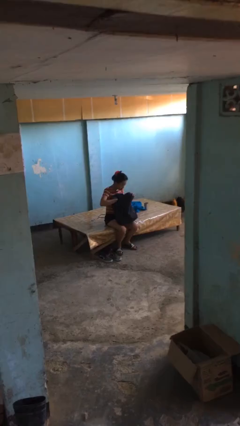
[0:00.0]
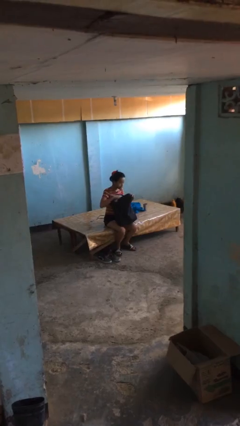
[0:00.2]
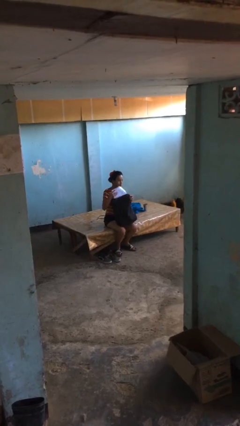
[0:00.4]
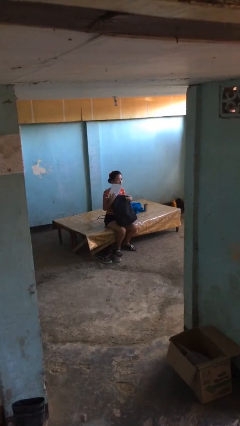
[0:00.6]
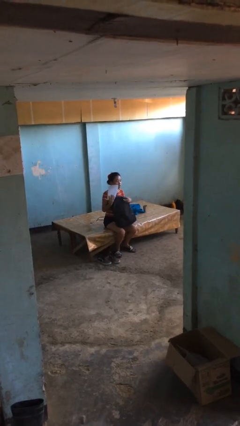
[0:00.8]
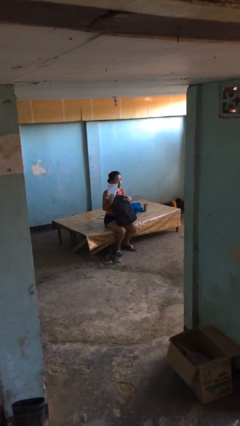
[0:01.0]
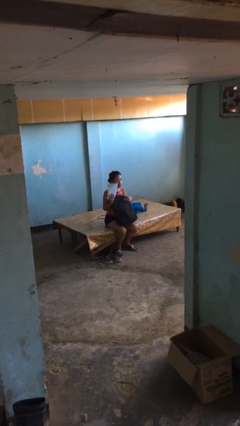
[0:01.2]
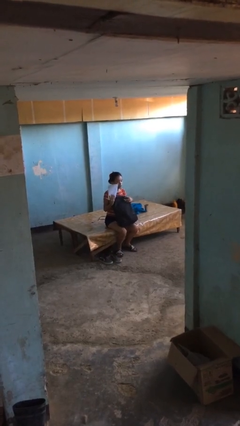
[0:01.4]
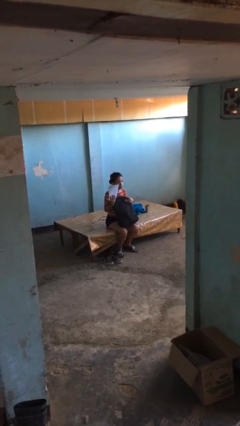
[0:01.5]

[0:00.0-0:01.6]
person takes object from backpack

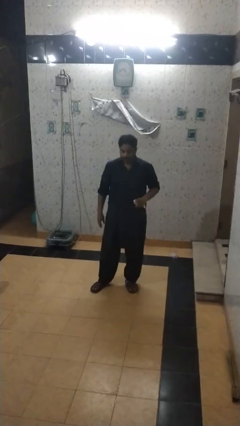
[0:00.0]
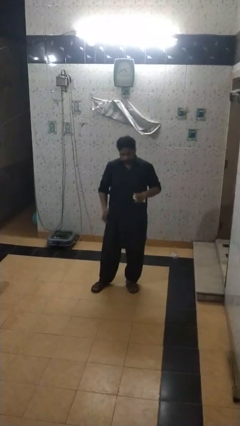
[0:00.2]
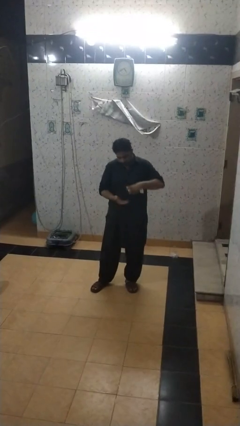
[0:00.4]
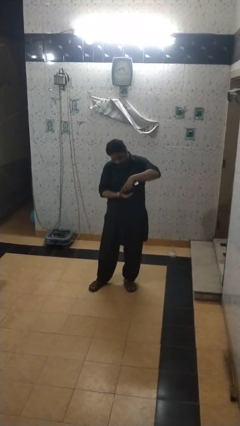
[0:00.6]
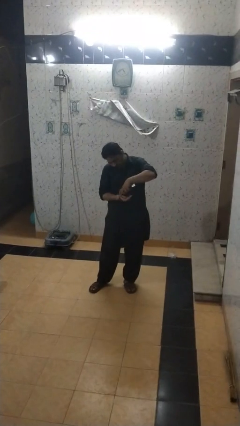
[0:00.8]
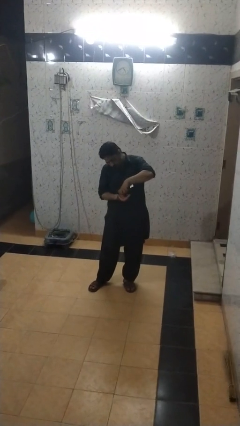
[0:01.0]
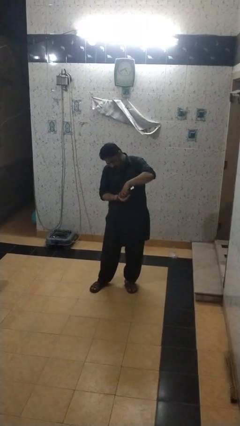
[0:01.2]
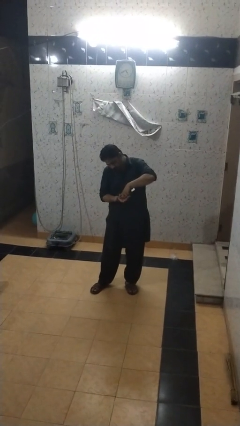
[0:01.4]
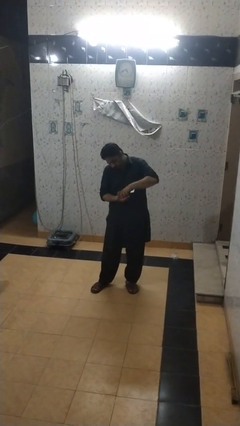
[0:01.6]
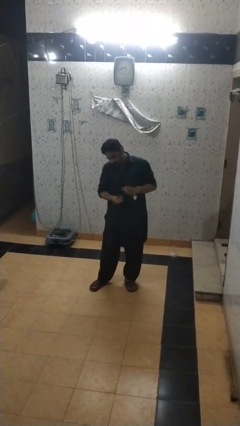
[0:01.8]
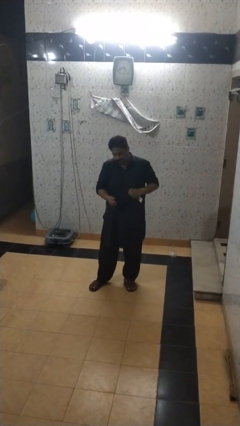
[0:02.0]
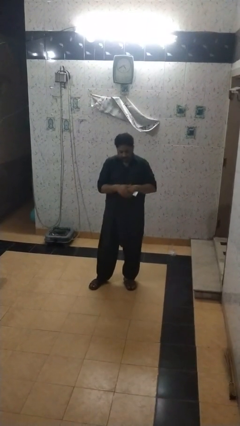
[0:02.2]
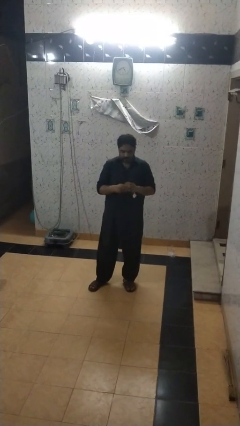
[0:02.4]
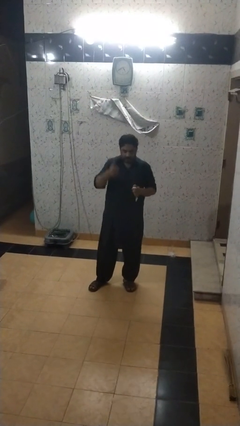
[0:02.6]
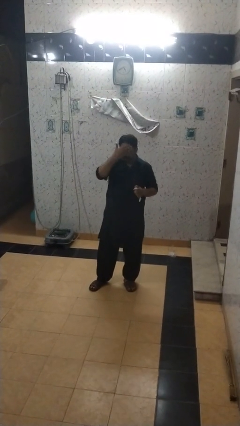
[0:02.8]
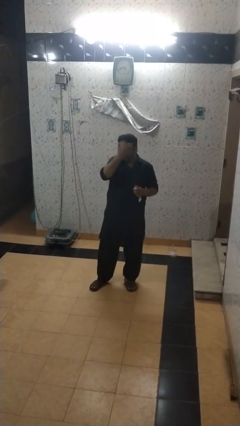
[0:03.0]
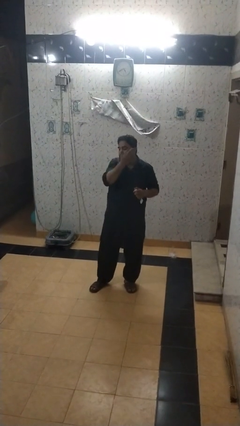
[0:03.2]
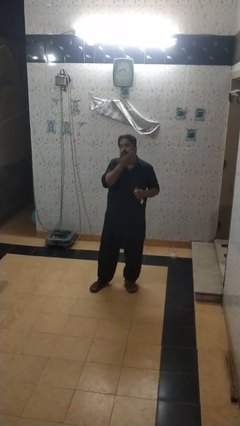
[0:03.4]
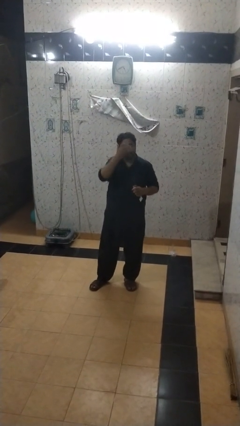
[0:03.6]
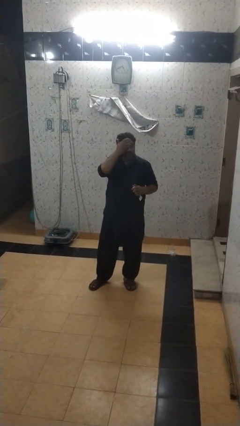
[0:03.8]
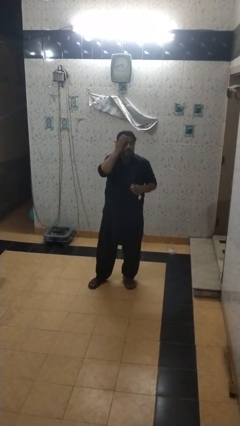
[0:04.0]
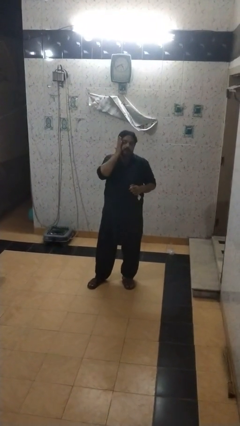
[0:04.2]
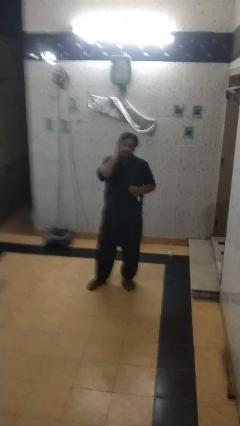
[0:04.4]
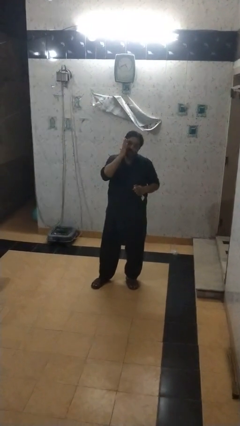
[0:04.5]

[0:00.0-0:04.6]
person applies facial moisturizer

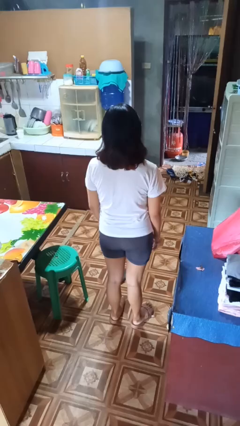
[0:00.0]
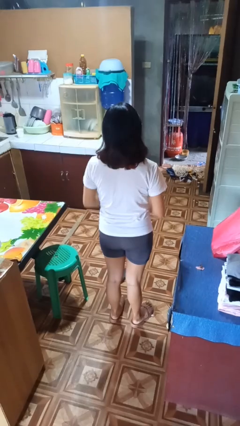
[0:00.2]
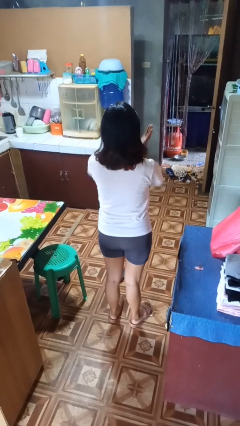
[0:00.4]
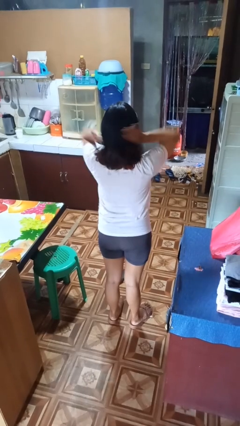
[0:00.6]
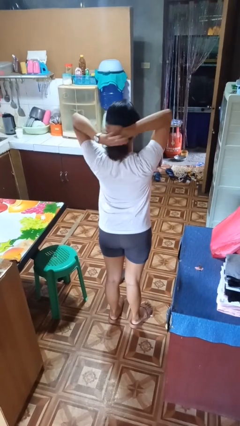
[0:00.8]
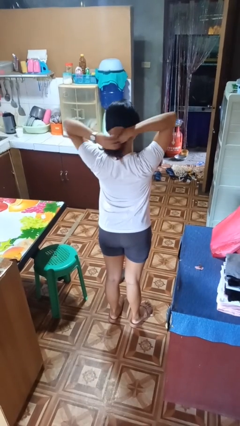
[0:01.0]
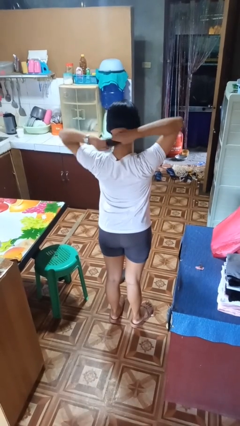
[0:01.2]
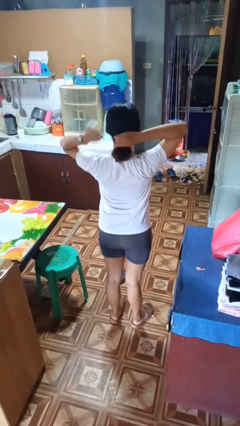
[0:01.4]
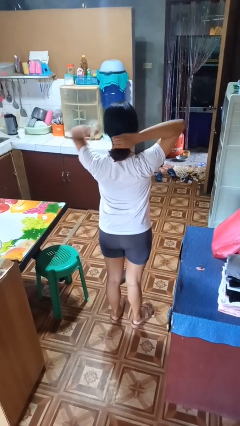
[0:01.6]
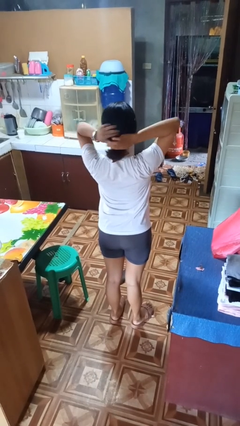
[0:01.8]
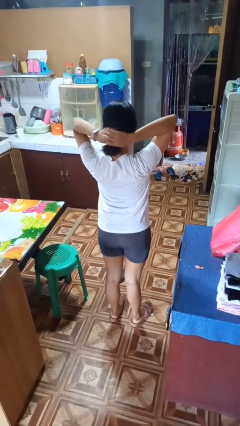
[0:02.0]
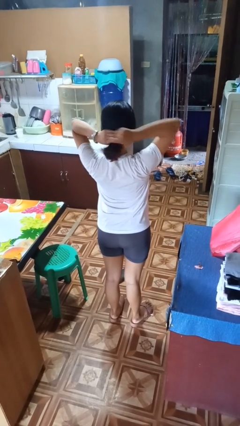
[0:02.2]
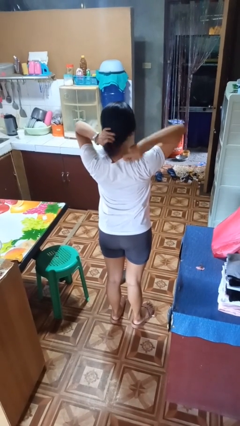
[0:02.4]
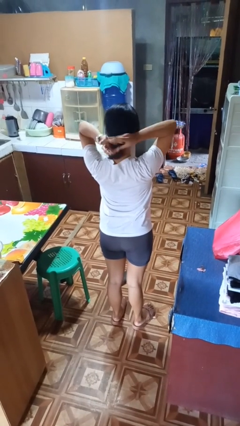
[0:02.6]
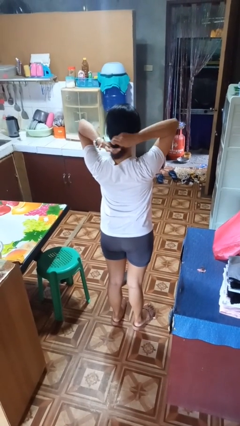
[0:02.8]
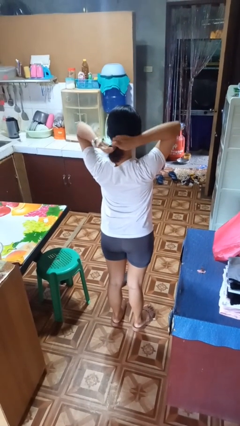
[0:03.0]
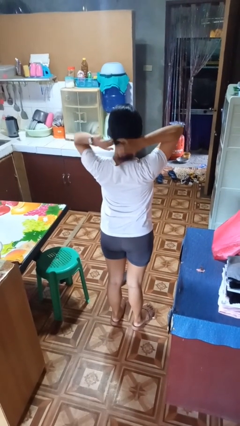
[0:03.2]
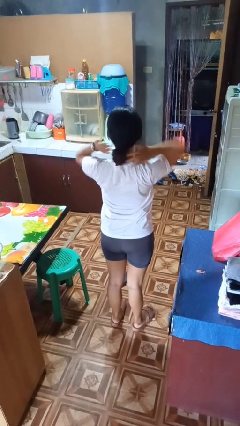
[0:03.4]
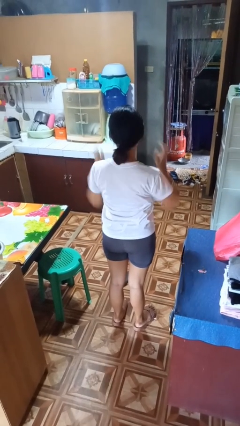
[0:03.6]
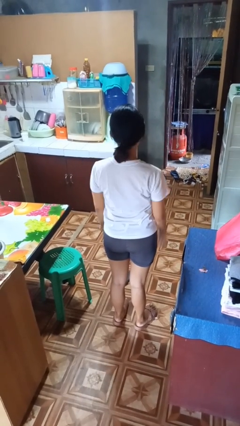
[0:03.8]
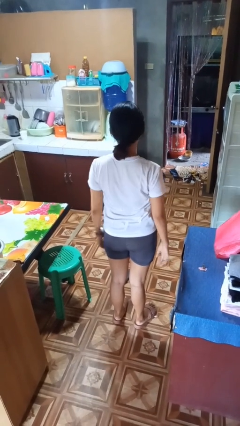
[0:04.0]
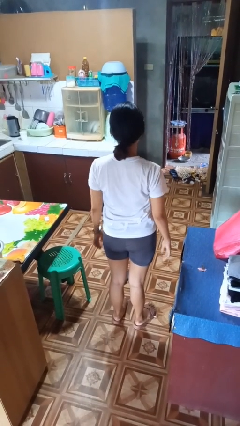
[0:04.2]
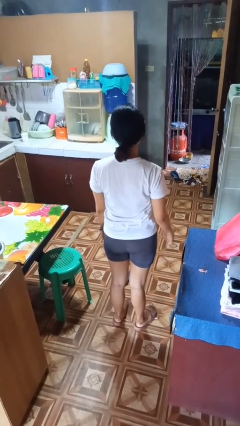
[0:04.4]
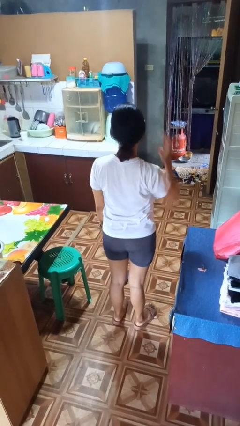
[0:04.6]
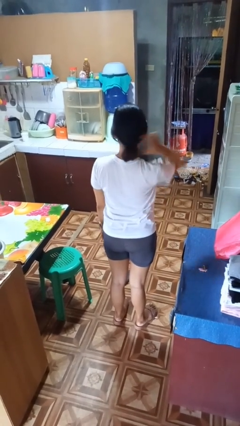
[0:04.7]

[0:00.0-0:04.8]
person puts hair in ponytail

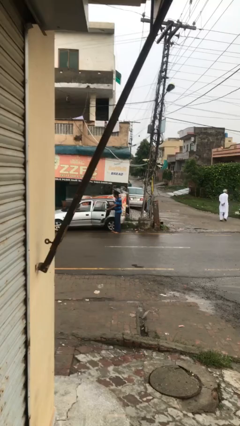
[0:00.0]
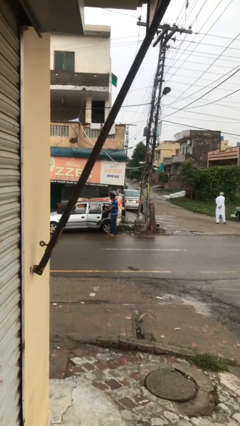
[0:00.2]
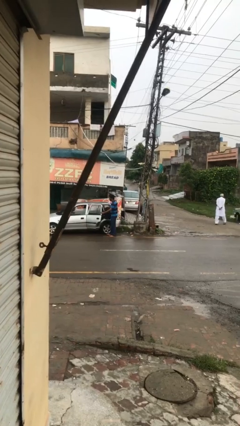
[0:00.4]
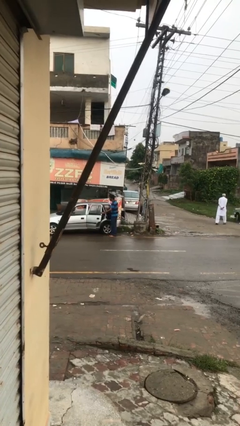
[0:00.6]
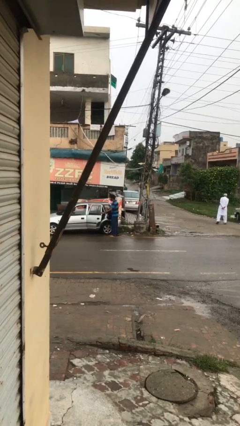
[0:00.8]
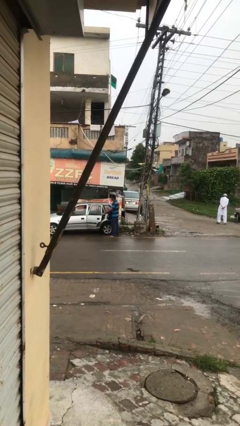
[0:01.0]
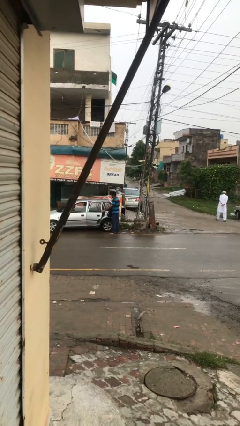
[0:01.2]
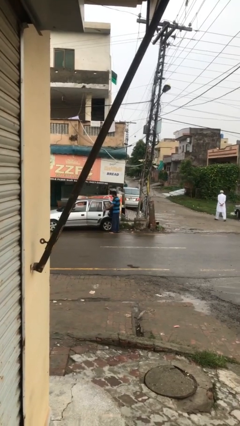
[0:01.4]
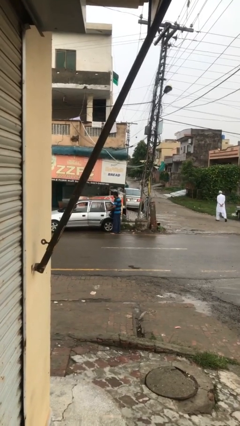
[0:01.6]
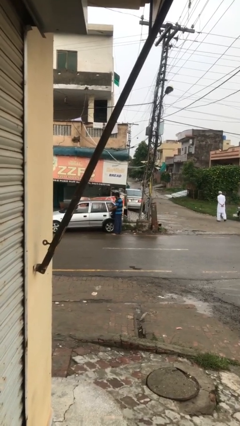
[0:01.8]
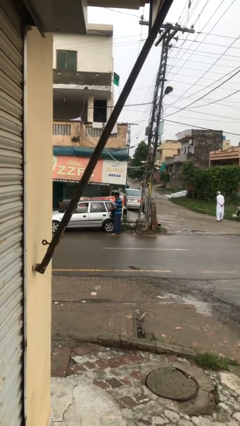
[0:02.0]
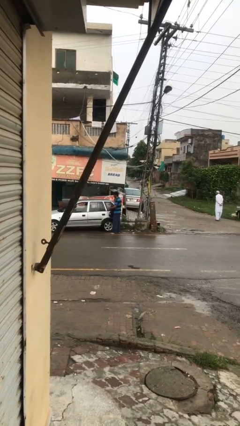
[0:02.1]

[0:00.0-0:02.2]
person closes car door

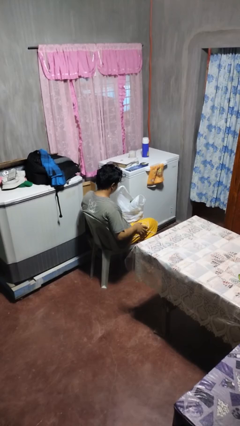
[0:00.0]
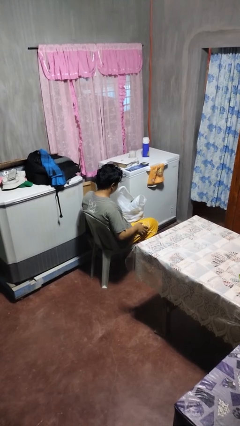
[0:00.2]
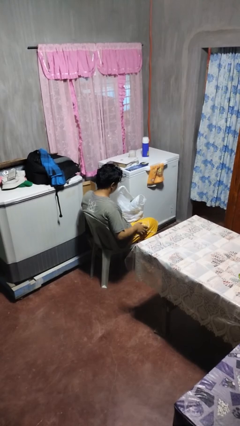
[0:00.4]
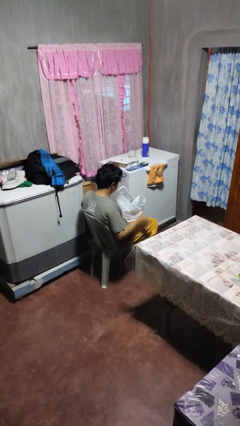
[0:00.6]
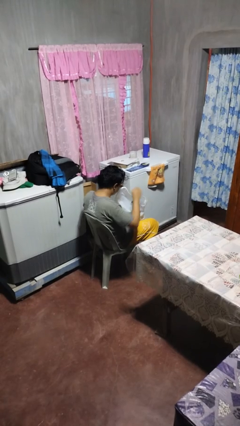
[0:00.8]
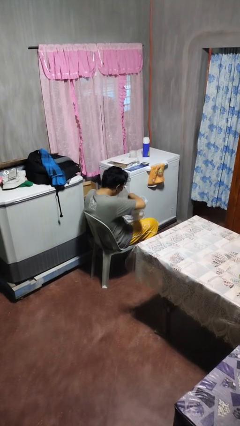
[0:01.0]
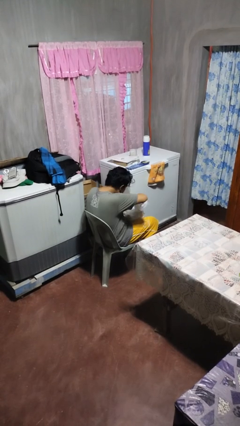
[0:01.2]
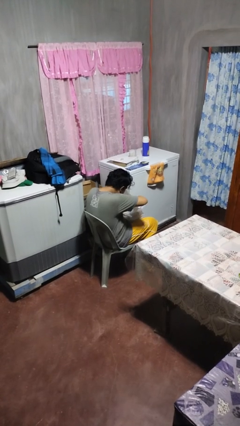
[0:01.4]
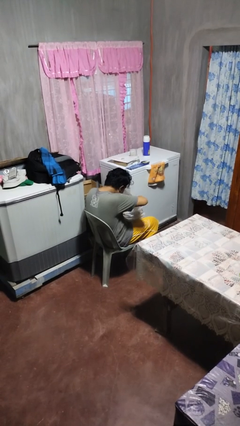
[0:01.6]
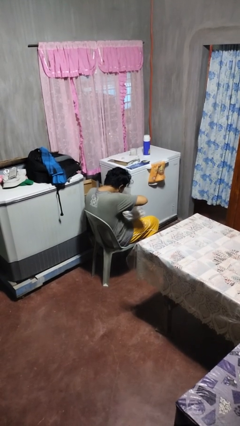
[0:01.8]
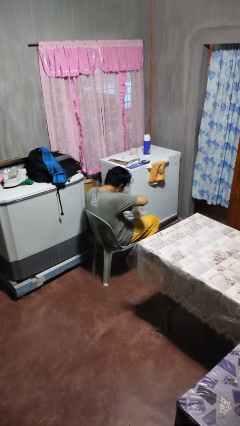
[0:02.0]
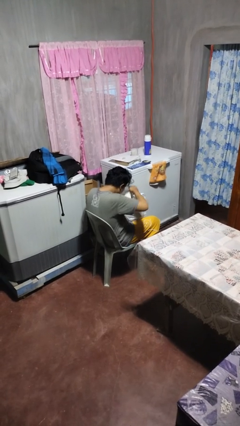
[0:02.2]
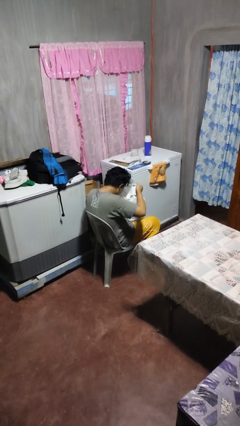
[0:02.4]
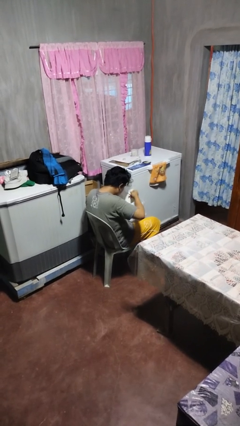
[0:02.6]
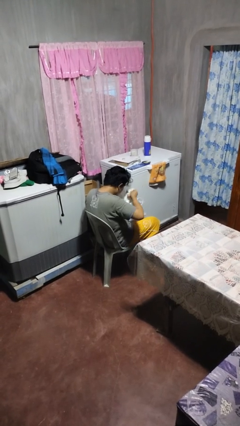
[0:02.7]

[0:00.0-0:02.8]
person searches in bag

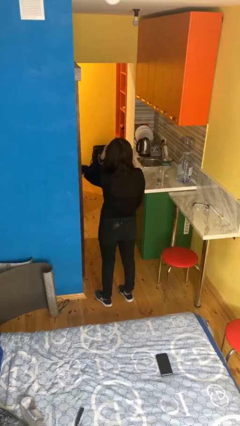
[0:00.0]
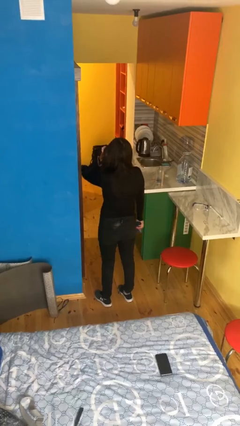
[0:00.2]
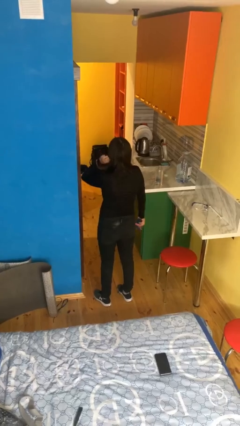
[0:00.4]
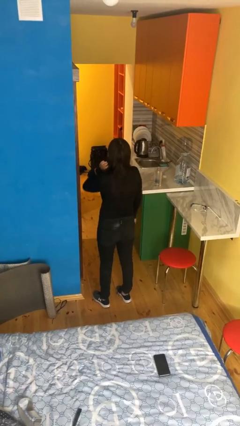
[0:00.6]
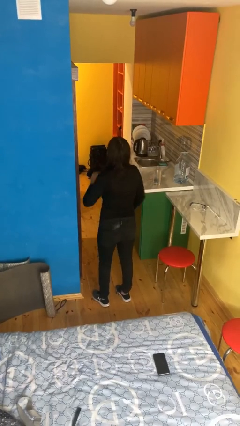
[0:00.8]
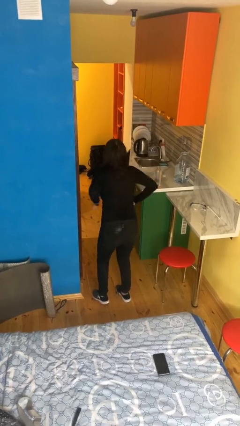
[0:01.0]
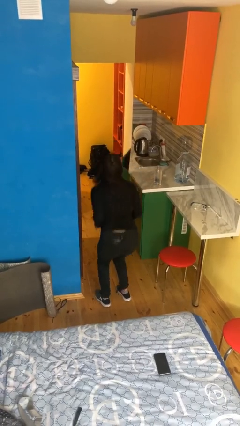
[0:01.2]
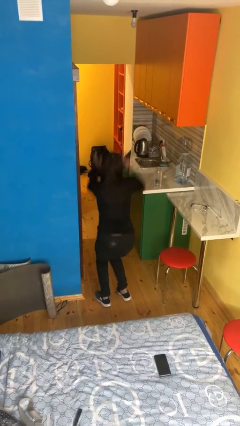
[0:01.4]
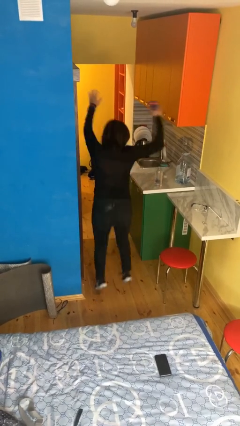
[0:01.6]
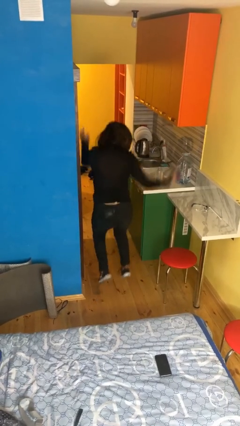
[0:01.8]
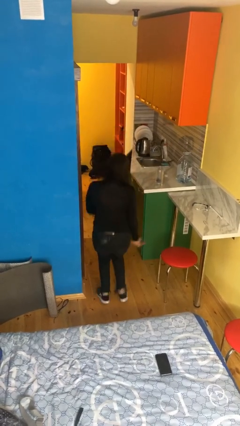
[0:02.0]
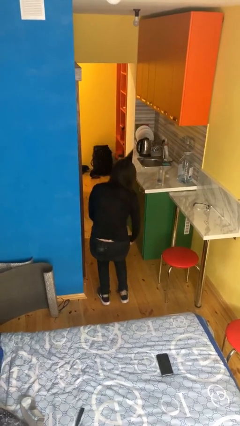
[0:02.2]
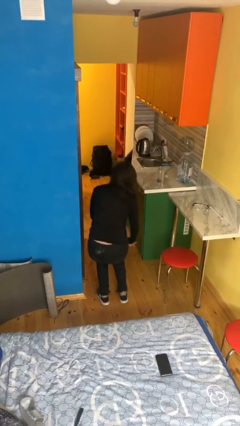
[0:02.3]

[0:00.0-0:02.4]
person jumps
